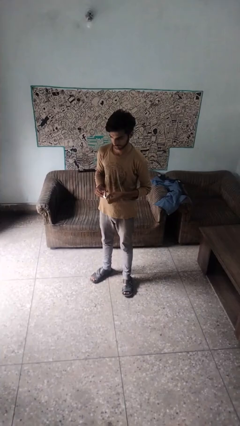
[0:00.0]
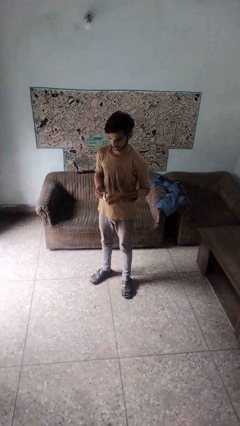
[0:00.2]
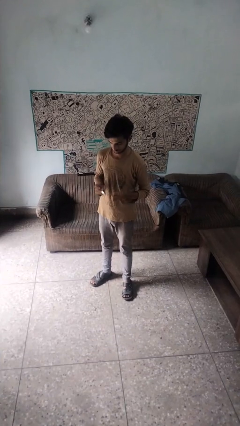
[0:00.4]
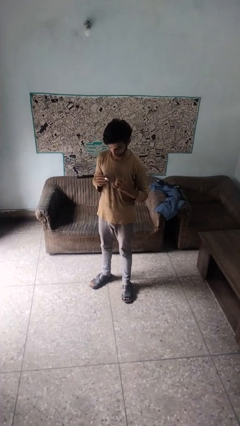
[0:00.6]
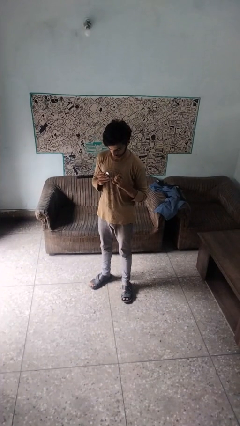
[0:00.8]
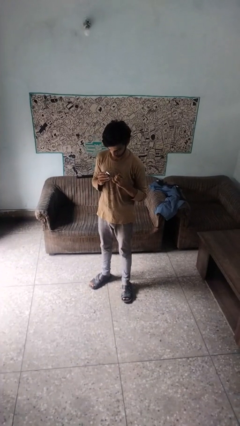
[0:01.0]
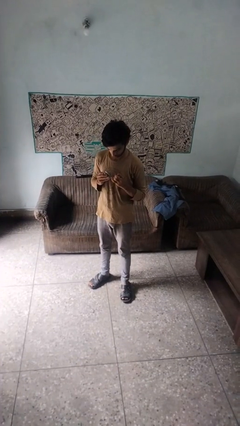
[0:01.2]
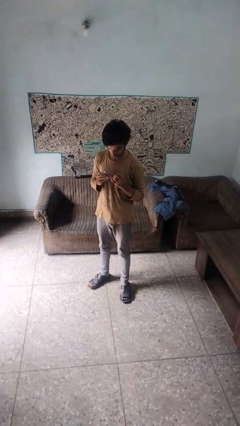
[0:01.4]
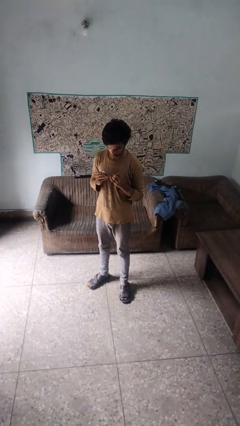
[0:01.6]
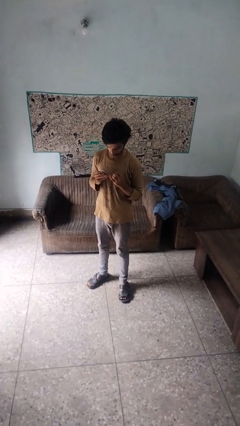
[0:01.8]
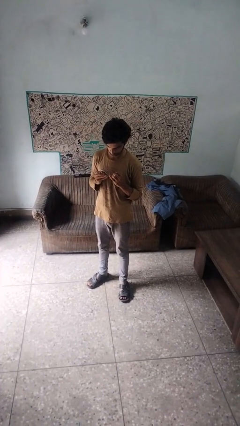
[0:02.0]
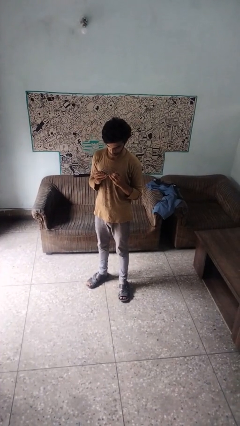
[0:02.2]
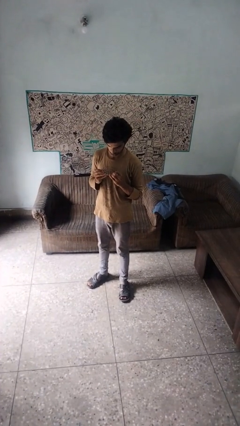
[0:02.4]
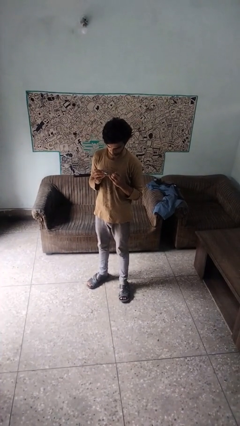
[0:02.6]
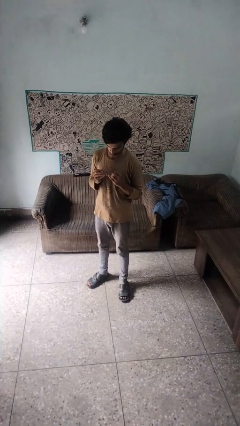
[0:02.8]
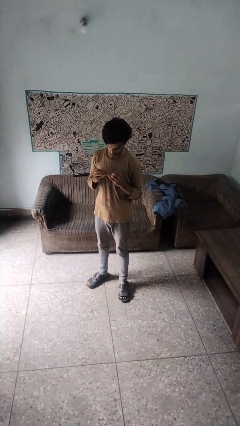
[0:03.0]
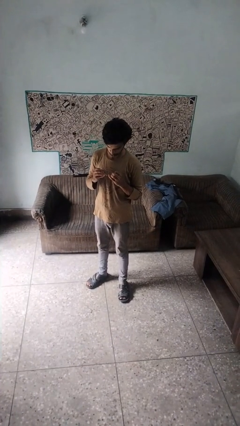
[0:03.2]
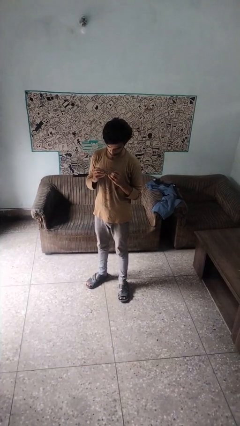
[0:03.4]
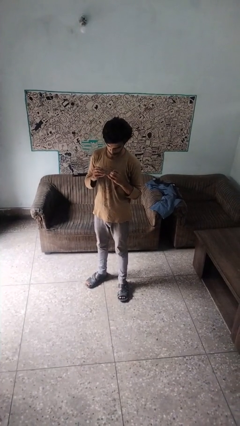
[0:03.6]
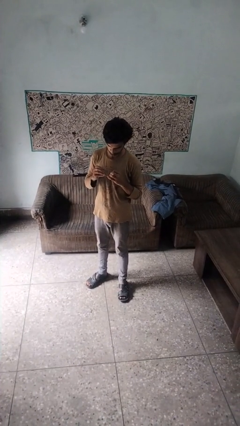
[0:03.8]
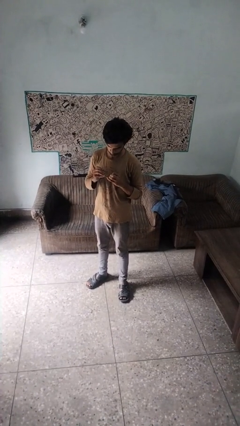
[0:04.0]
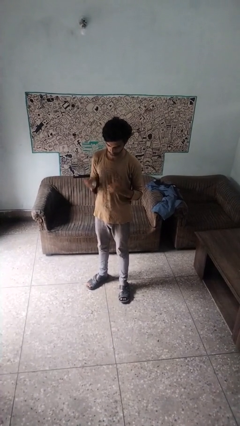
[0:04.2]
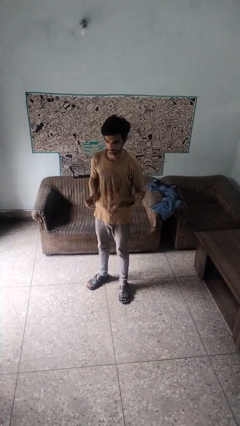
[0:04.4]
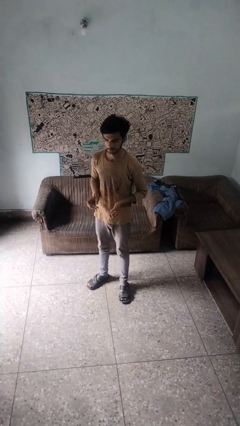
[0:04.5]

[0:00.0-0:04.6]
person clips fingernails

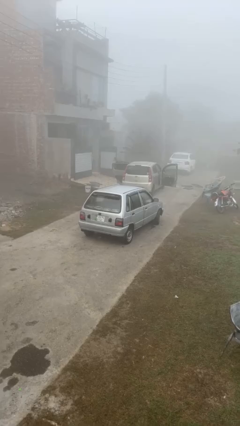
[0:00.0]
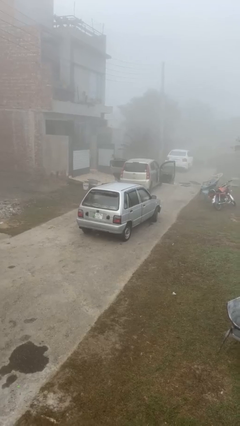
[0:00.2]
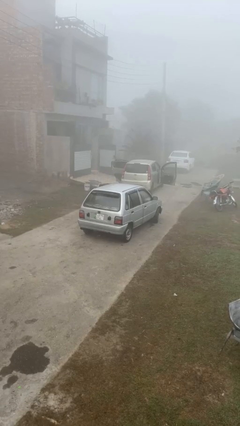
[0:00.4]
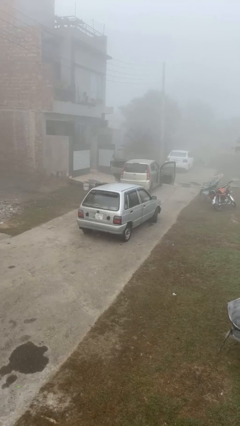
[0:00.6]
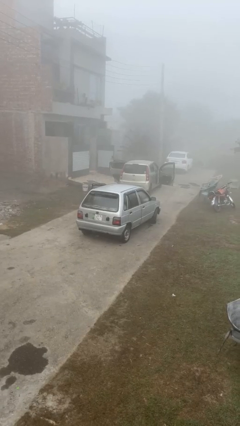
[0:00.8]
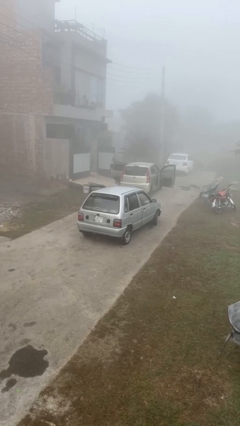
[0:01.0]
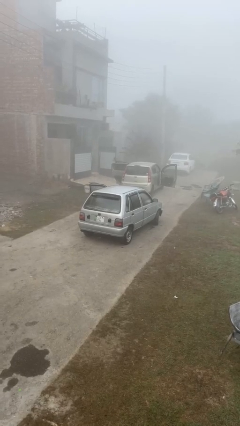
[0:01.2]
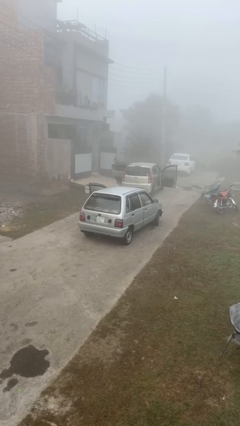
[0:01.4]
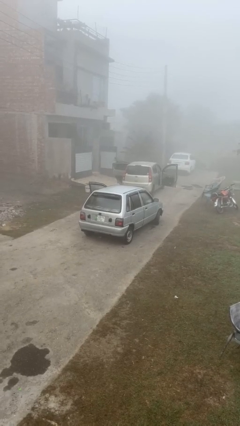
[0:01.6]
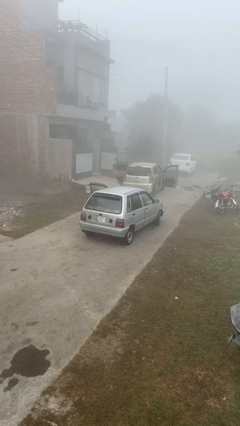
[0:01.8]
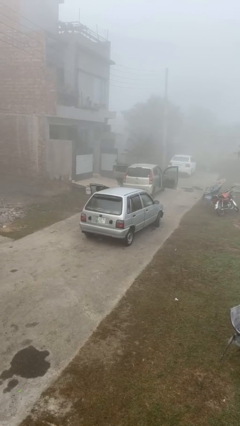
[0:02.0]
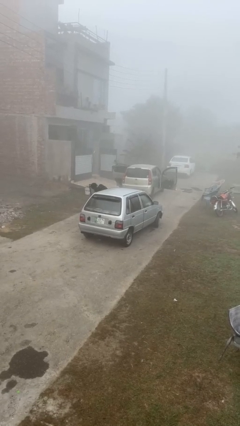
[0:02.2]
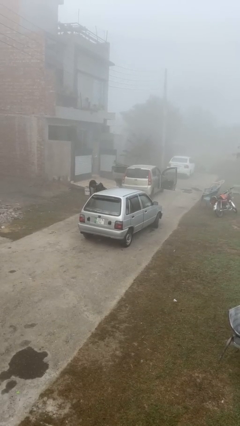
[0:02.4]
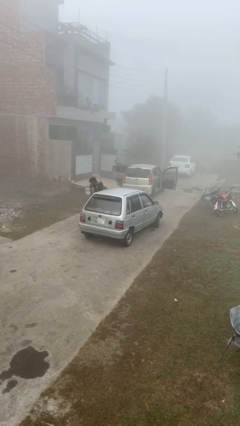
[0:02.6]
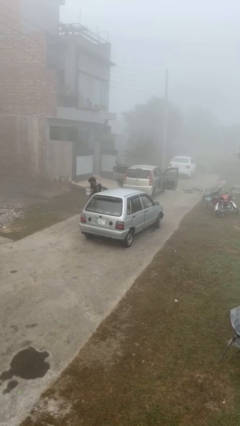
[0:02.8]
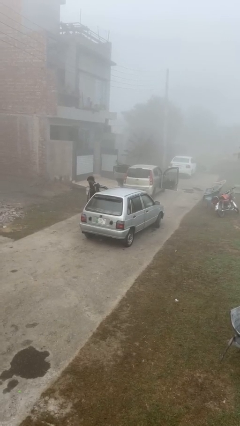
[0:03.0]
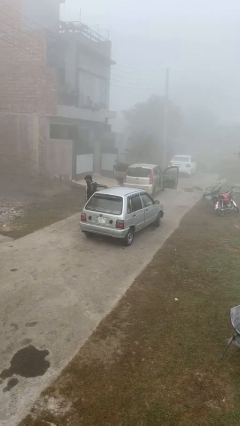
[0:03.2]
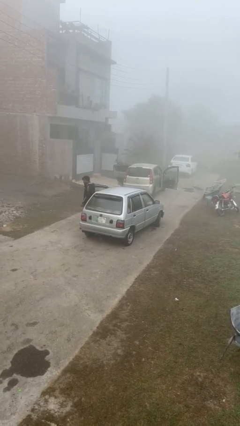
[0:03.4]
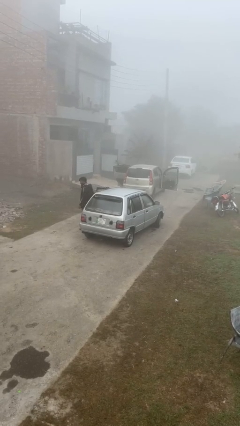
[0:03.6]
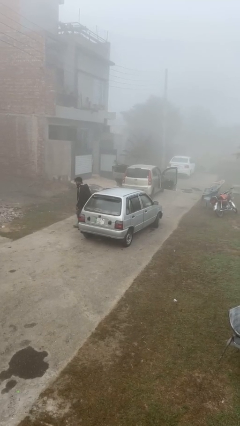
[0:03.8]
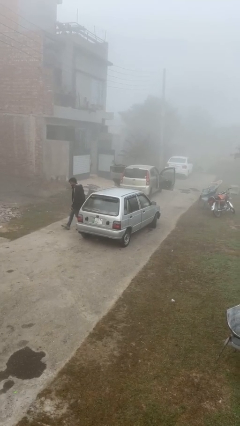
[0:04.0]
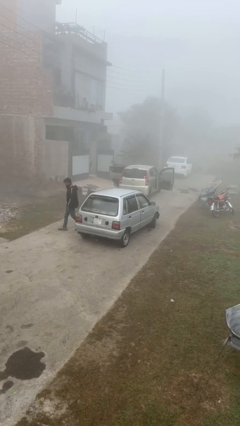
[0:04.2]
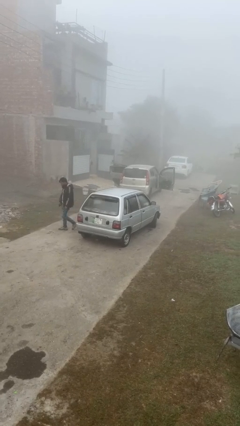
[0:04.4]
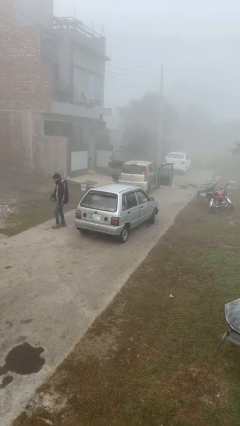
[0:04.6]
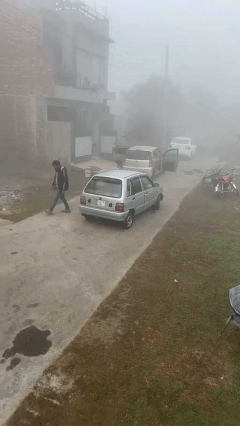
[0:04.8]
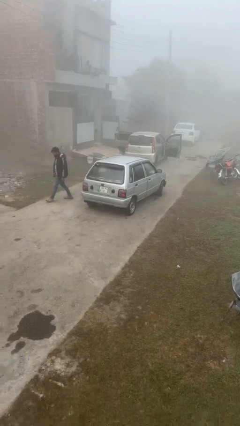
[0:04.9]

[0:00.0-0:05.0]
car drops off person

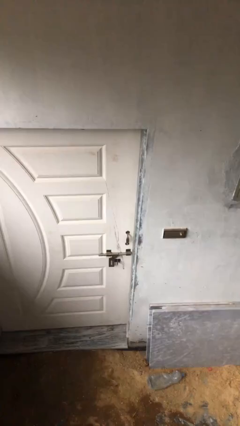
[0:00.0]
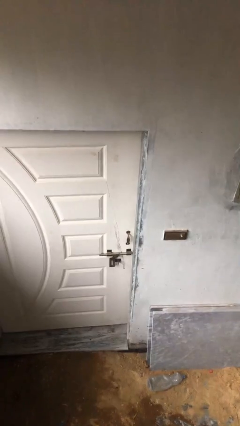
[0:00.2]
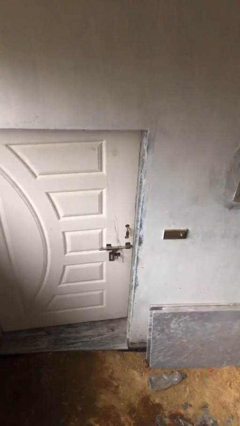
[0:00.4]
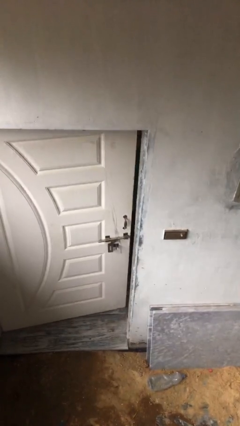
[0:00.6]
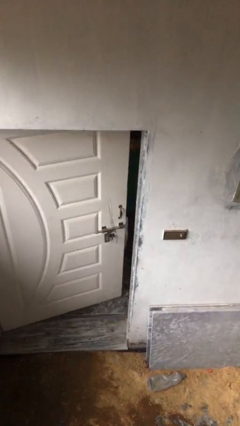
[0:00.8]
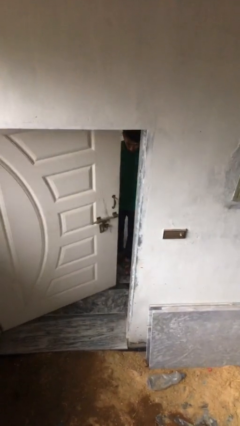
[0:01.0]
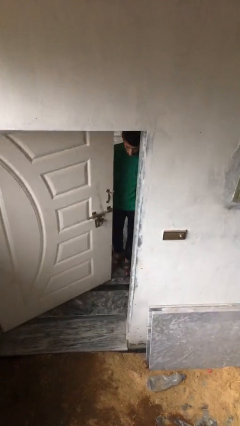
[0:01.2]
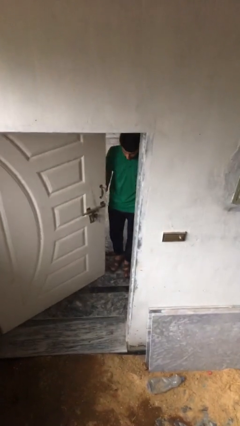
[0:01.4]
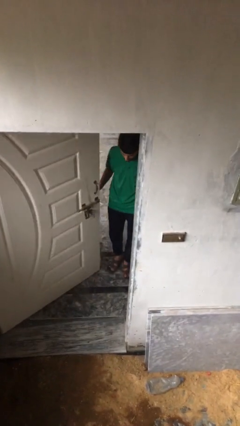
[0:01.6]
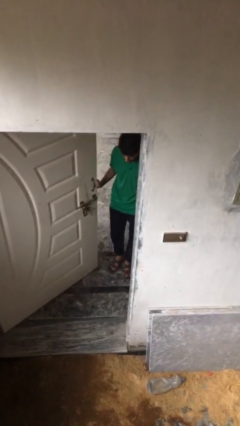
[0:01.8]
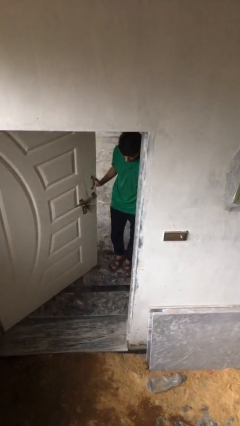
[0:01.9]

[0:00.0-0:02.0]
person opens facility door

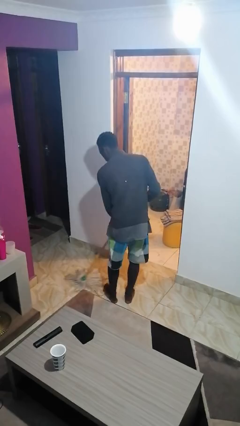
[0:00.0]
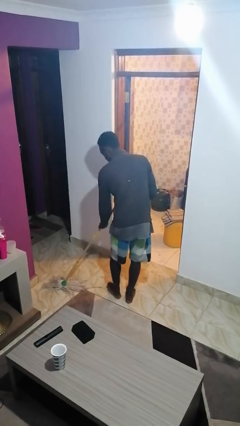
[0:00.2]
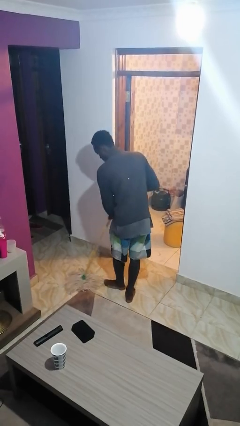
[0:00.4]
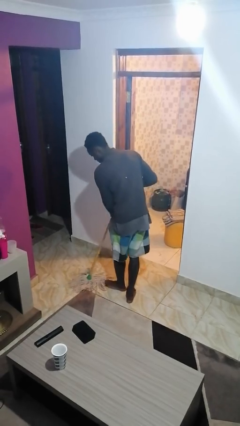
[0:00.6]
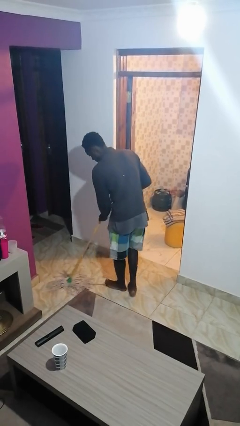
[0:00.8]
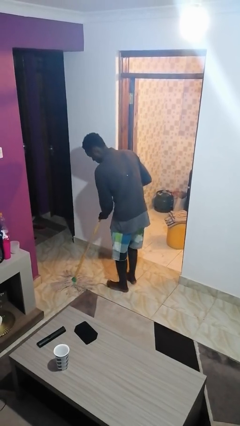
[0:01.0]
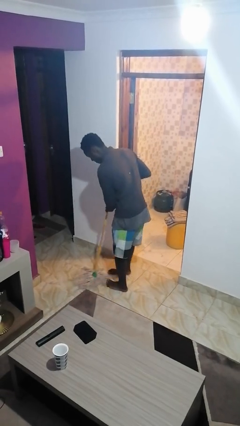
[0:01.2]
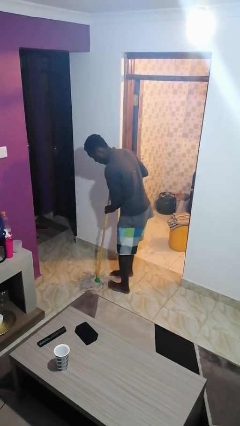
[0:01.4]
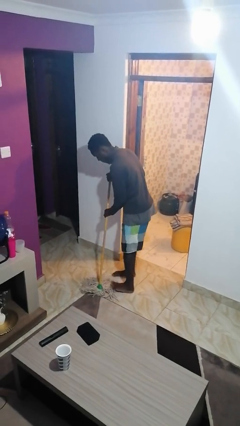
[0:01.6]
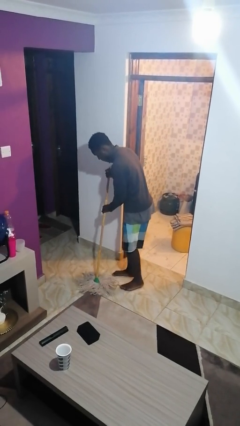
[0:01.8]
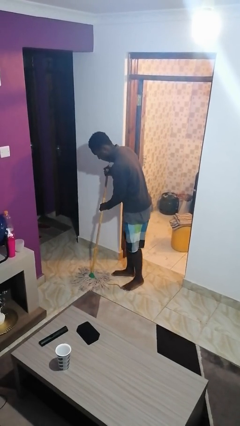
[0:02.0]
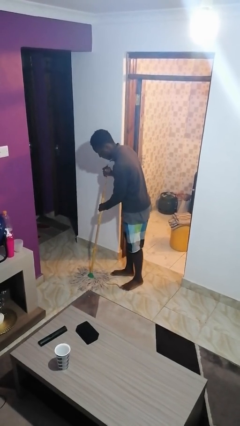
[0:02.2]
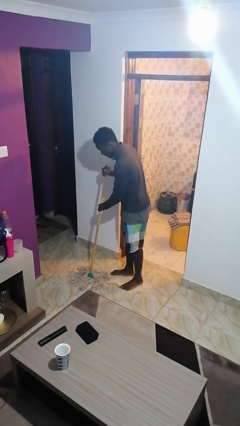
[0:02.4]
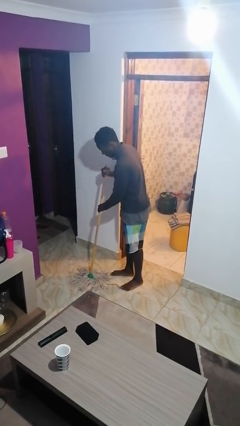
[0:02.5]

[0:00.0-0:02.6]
person mops

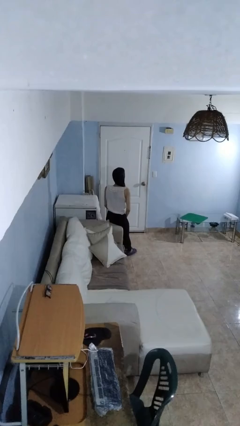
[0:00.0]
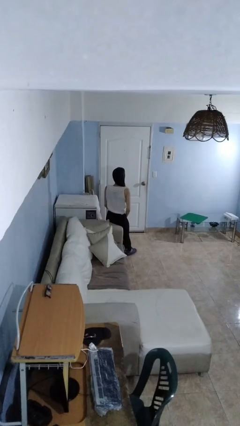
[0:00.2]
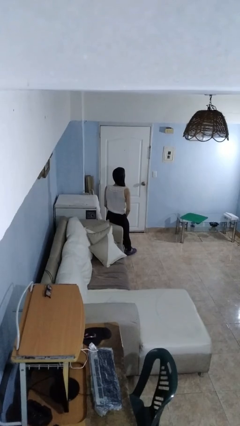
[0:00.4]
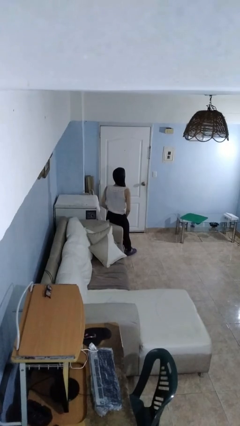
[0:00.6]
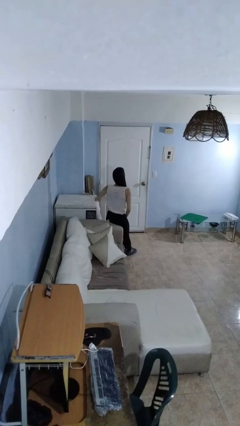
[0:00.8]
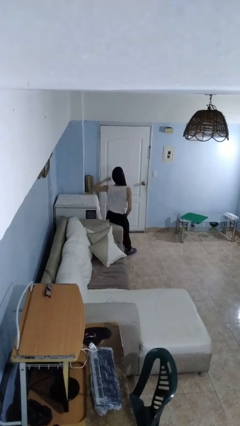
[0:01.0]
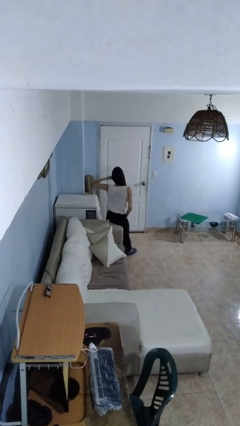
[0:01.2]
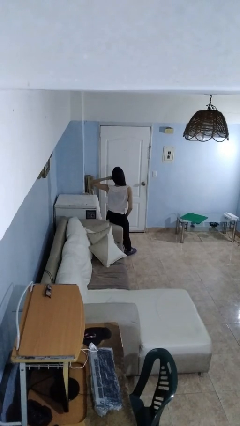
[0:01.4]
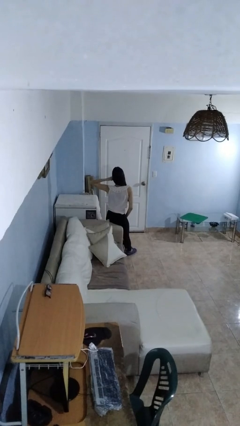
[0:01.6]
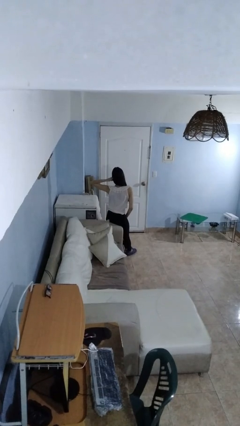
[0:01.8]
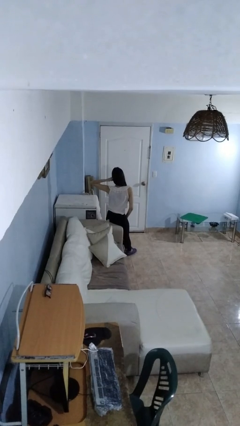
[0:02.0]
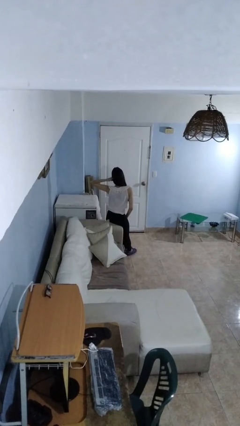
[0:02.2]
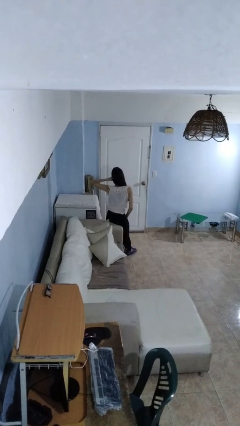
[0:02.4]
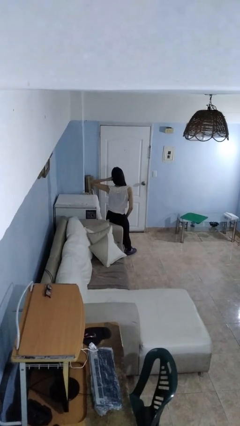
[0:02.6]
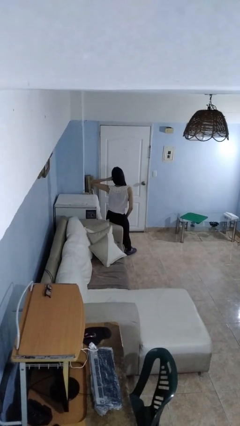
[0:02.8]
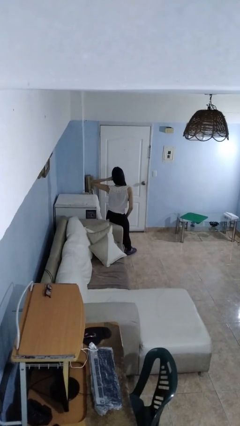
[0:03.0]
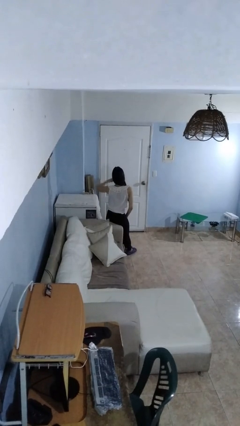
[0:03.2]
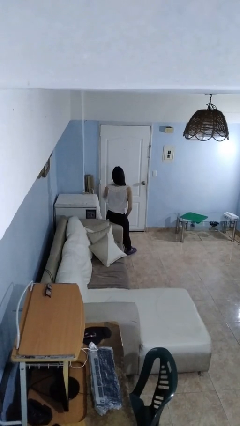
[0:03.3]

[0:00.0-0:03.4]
person gestures call me
